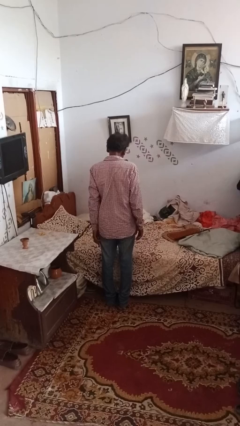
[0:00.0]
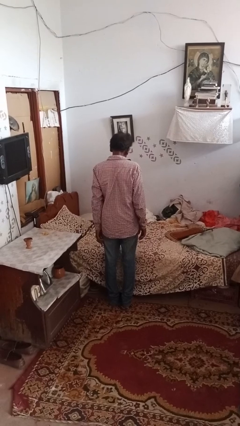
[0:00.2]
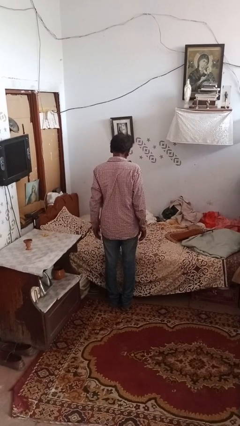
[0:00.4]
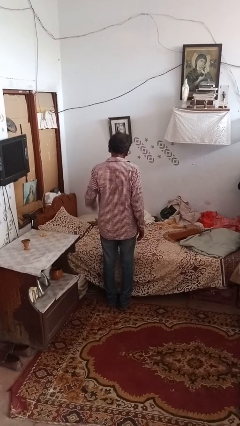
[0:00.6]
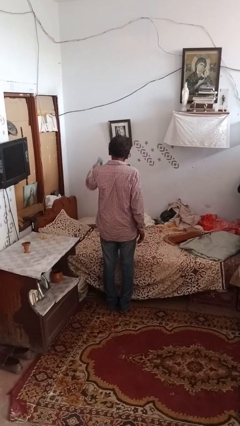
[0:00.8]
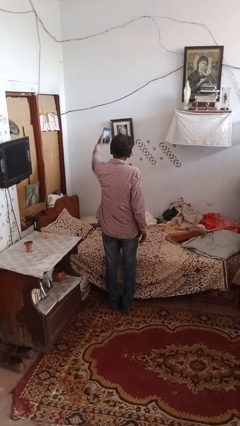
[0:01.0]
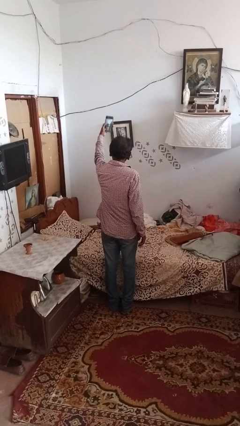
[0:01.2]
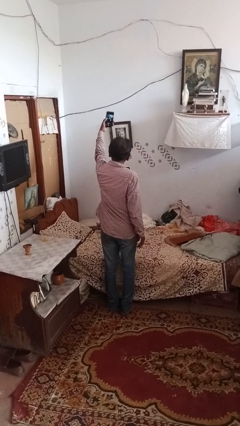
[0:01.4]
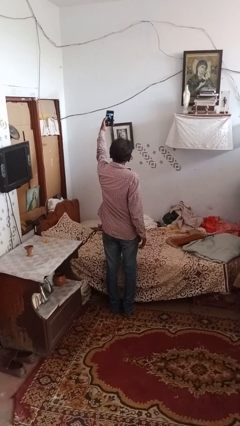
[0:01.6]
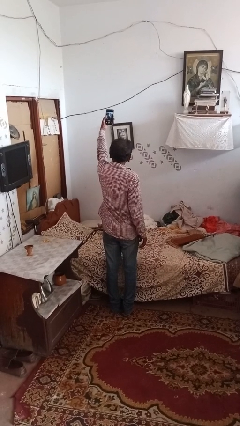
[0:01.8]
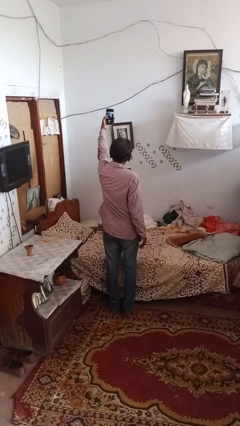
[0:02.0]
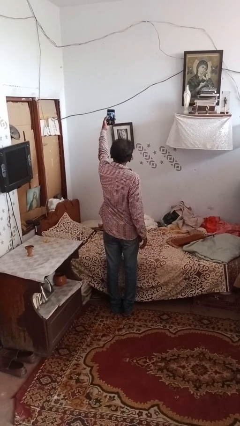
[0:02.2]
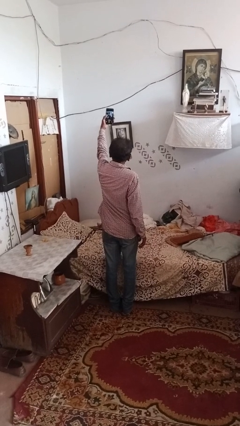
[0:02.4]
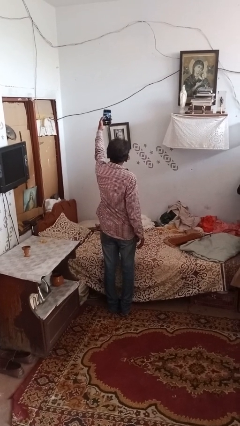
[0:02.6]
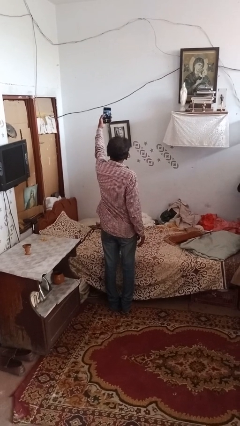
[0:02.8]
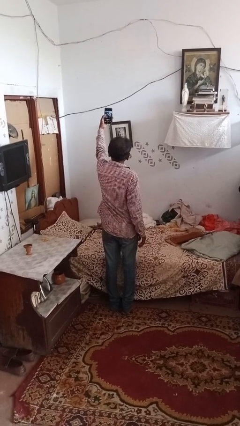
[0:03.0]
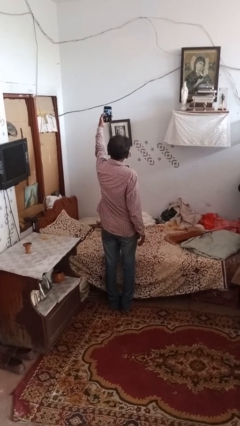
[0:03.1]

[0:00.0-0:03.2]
person takes selfie

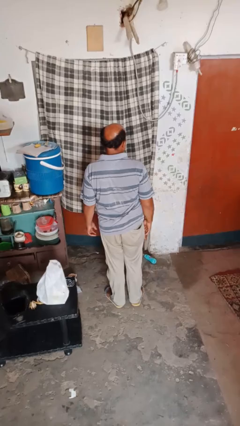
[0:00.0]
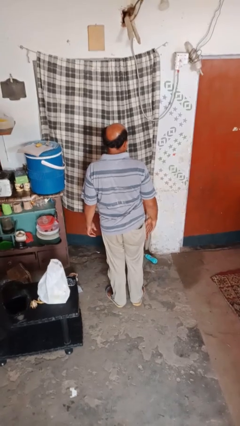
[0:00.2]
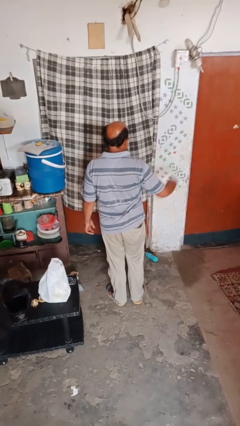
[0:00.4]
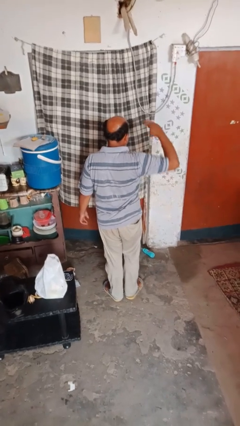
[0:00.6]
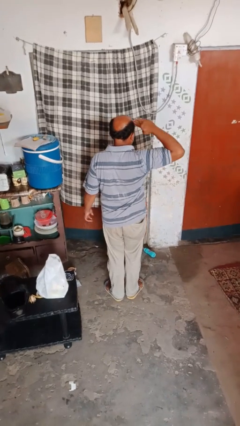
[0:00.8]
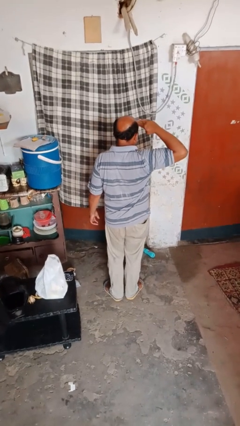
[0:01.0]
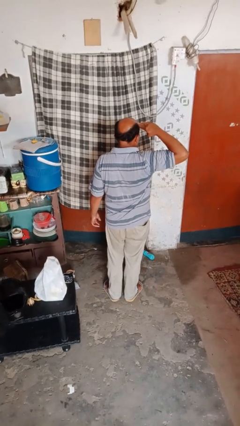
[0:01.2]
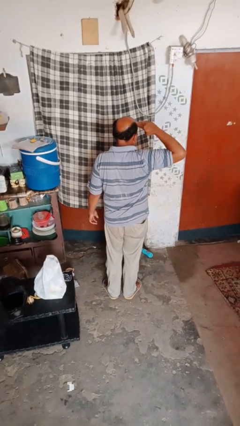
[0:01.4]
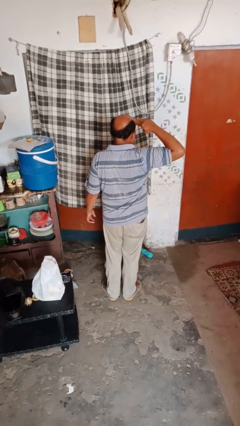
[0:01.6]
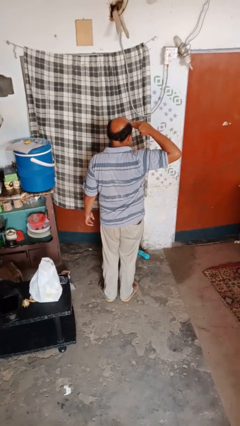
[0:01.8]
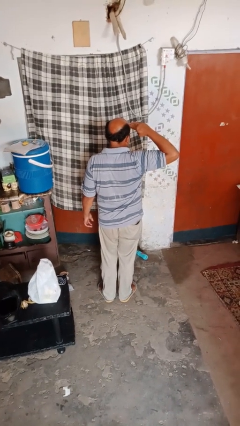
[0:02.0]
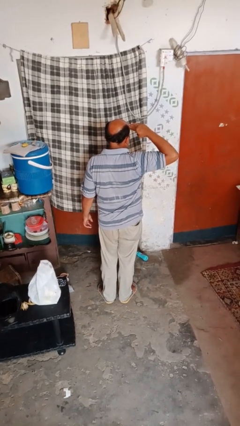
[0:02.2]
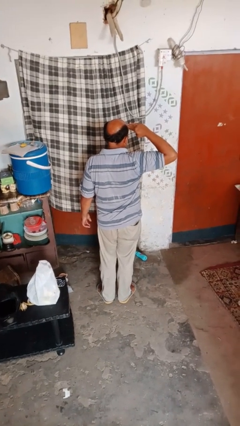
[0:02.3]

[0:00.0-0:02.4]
person salutes

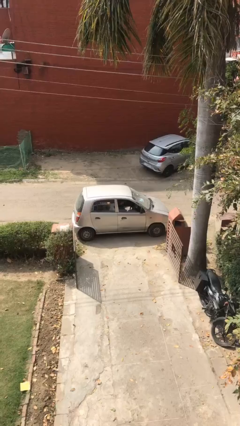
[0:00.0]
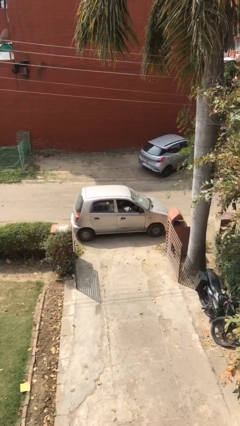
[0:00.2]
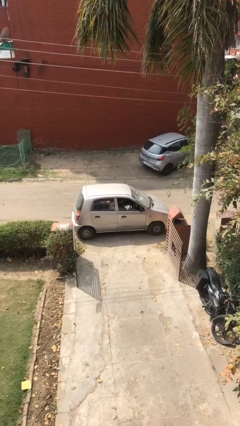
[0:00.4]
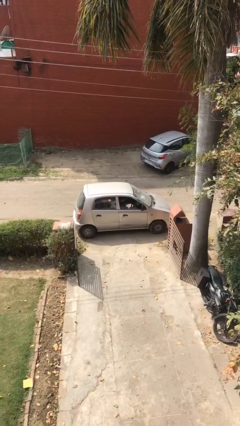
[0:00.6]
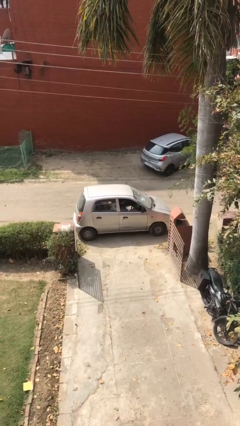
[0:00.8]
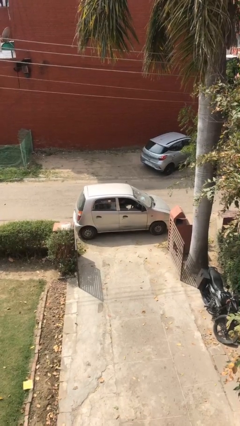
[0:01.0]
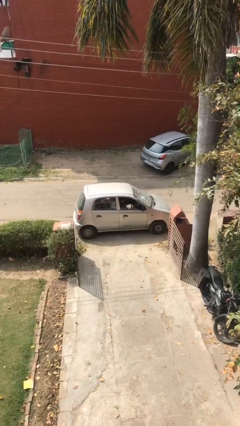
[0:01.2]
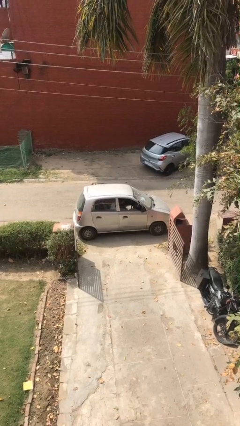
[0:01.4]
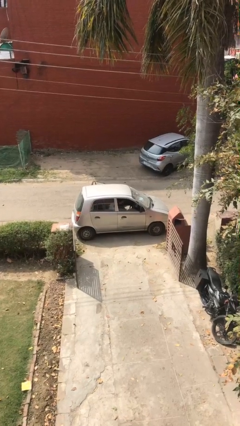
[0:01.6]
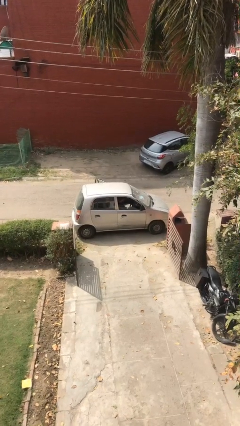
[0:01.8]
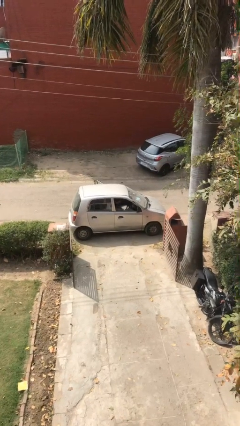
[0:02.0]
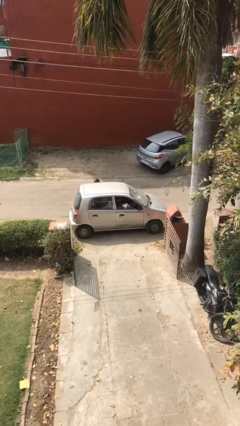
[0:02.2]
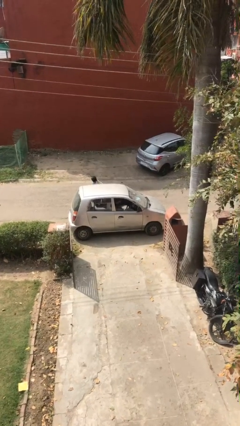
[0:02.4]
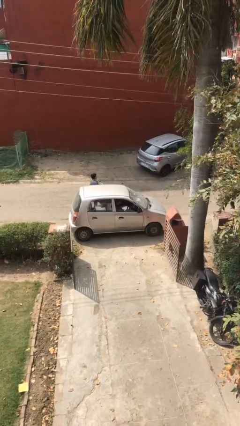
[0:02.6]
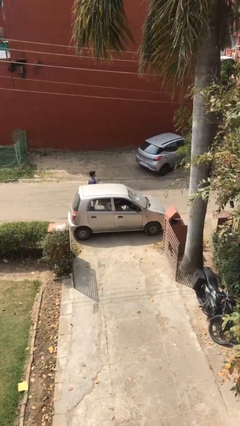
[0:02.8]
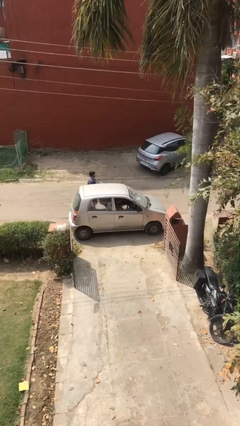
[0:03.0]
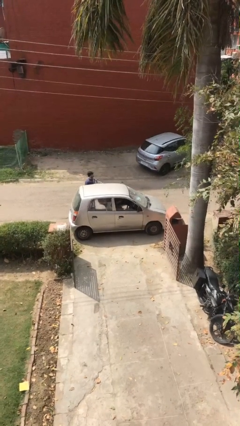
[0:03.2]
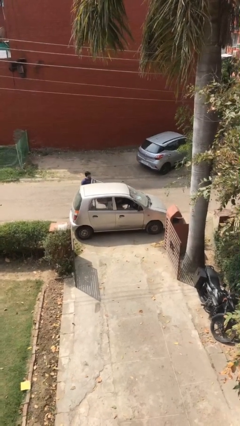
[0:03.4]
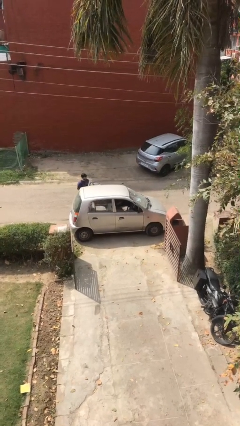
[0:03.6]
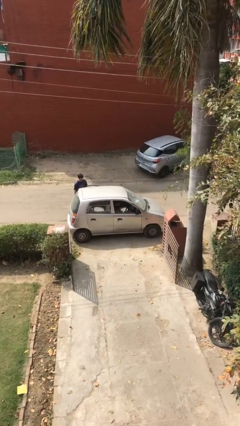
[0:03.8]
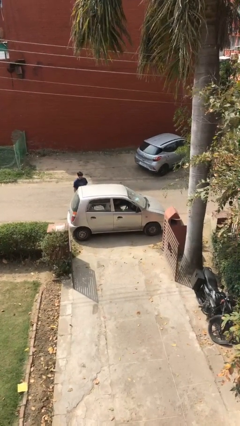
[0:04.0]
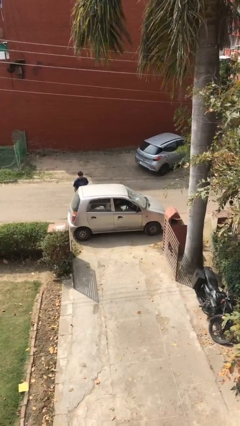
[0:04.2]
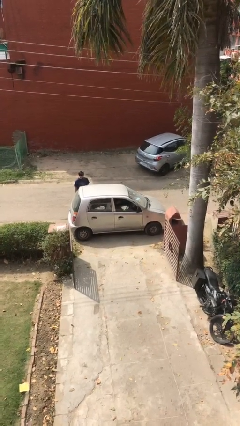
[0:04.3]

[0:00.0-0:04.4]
car drops off person

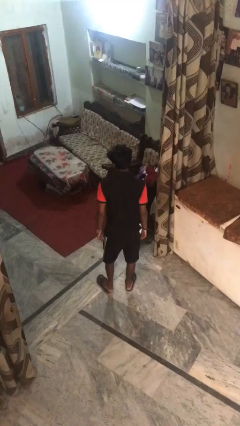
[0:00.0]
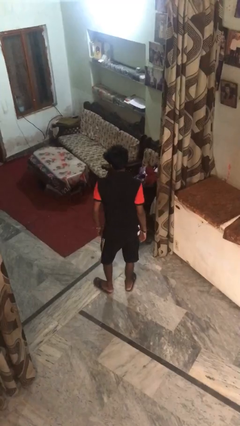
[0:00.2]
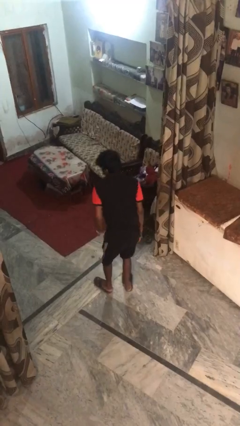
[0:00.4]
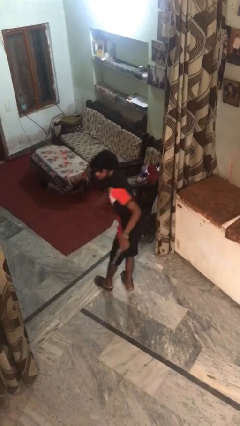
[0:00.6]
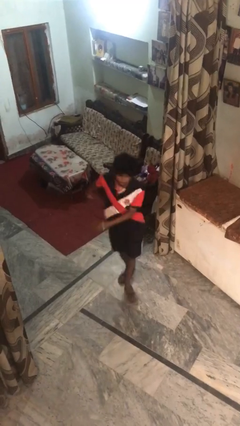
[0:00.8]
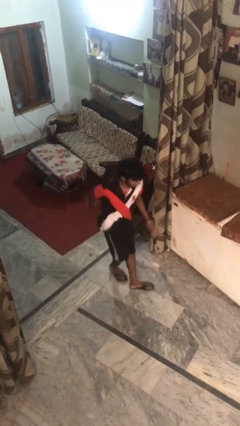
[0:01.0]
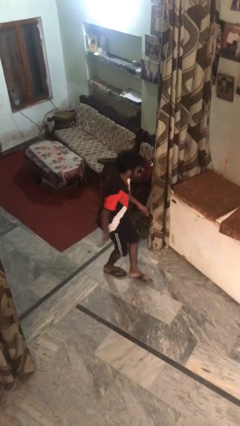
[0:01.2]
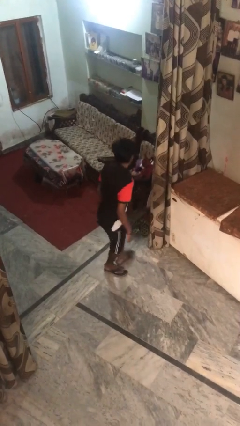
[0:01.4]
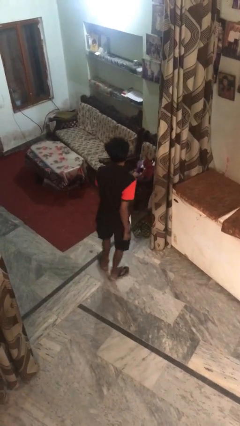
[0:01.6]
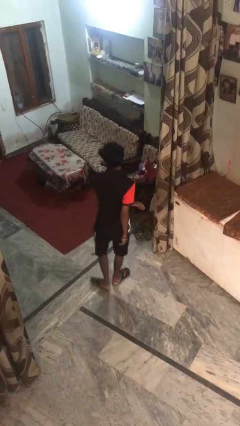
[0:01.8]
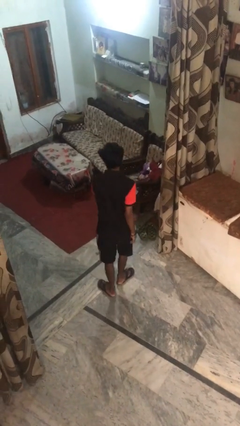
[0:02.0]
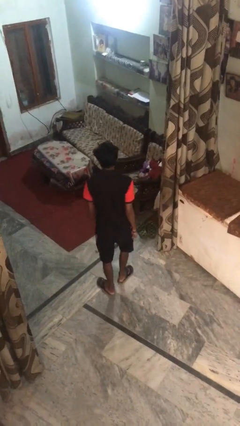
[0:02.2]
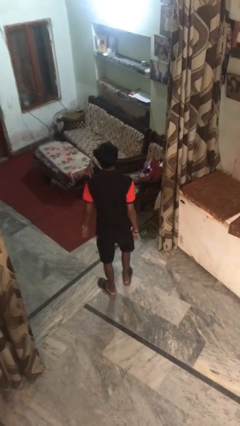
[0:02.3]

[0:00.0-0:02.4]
person twirls

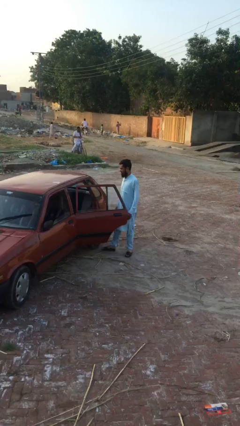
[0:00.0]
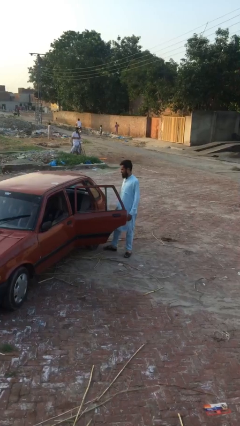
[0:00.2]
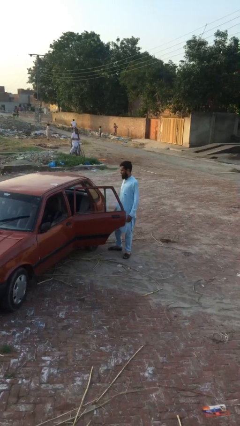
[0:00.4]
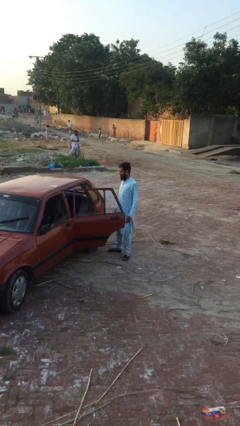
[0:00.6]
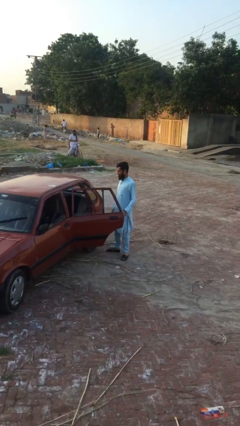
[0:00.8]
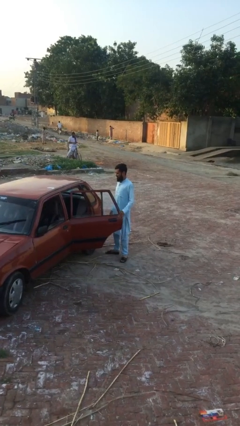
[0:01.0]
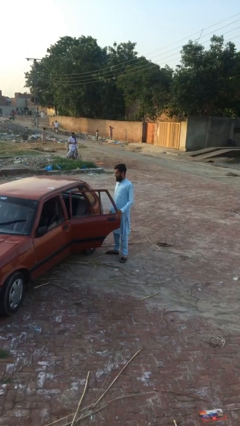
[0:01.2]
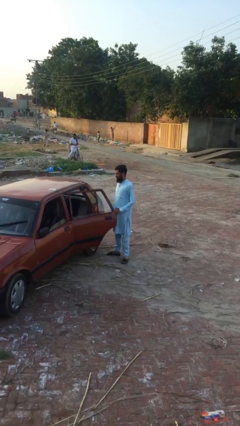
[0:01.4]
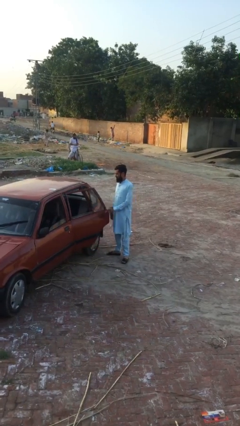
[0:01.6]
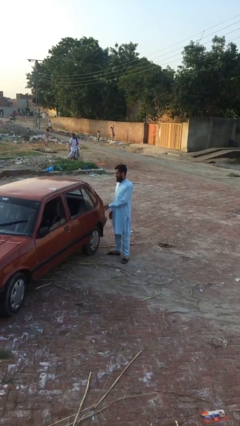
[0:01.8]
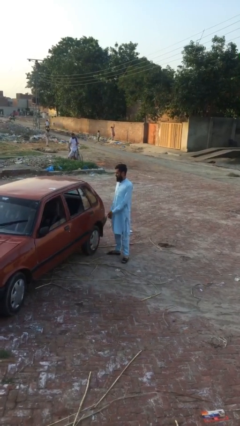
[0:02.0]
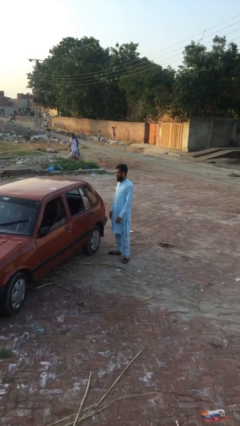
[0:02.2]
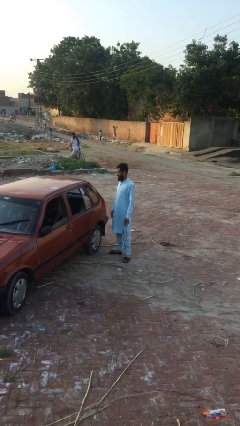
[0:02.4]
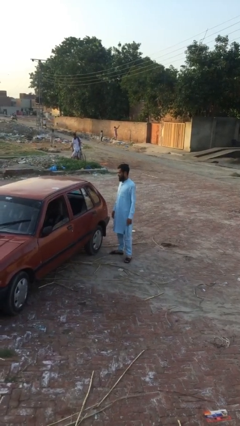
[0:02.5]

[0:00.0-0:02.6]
person closes car door

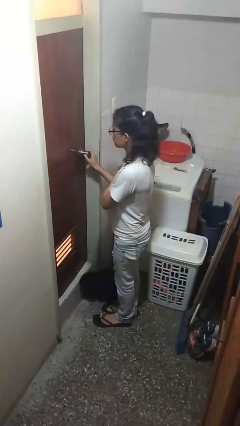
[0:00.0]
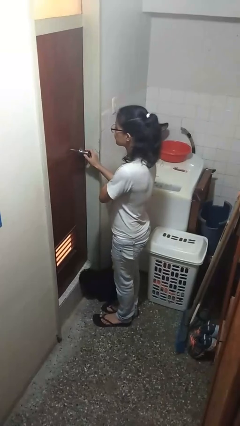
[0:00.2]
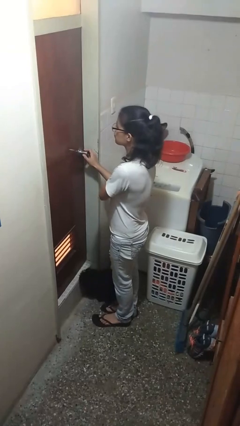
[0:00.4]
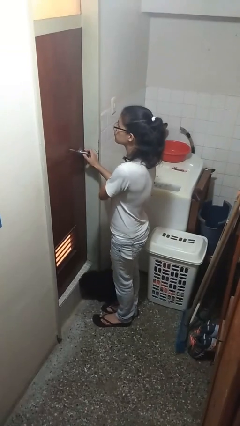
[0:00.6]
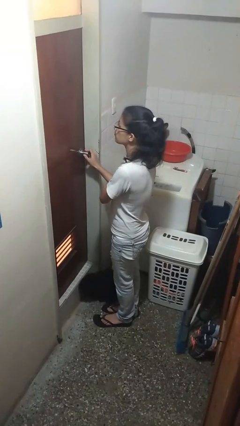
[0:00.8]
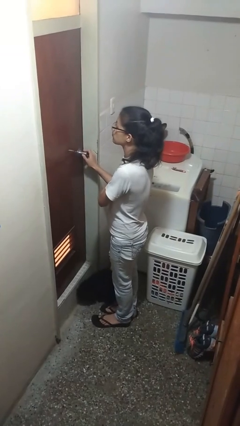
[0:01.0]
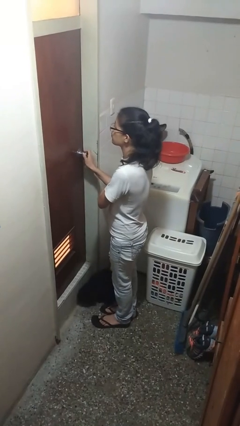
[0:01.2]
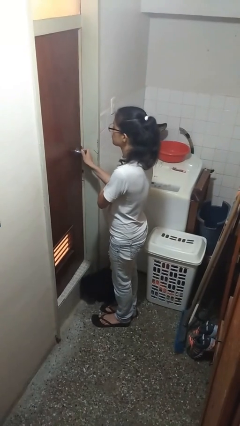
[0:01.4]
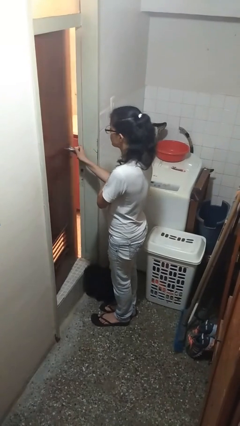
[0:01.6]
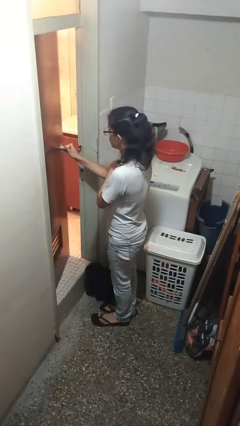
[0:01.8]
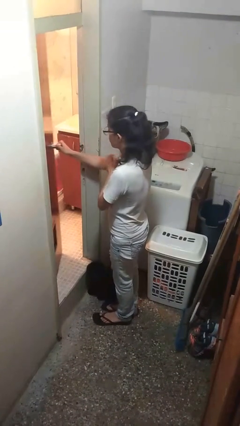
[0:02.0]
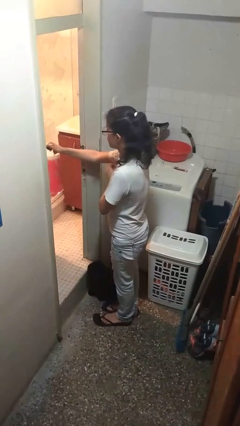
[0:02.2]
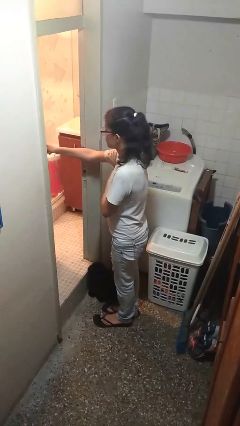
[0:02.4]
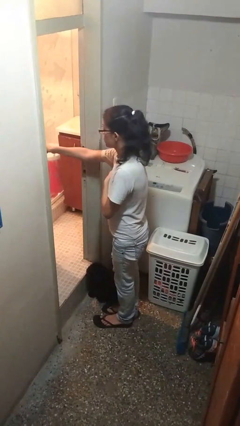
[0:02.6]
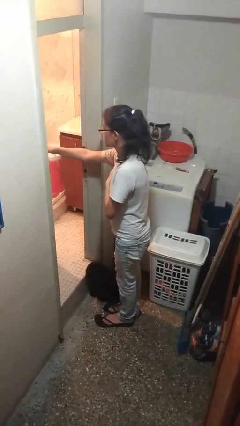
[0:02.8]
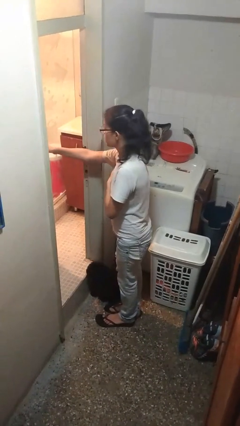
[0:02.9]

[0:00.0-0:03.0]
person opens facility door
